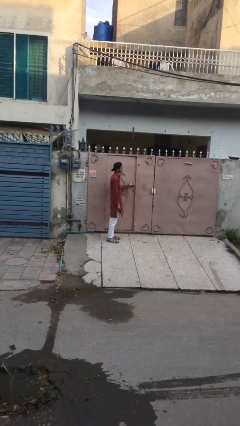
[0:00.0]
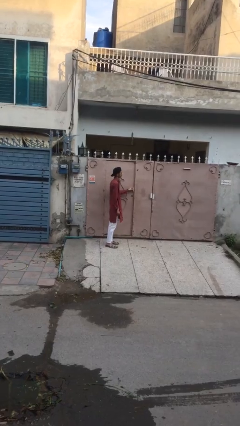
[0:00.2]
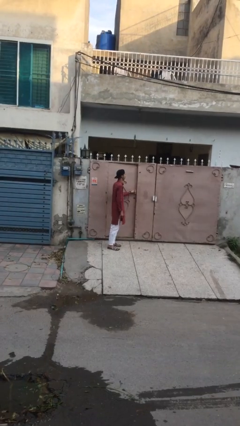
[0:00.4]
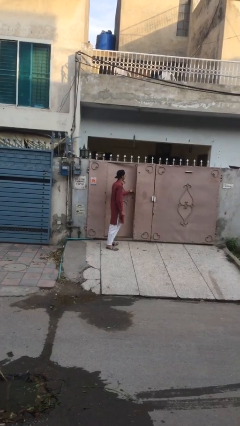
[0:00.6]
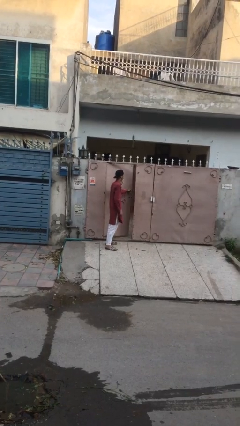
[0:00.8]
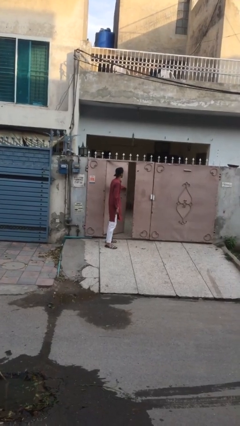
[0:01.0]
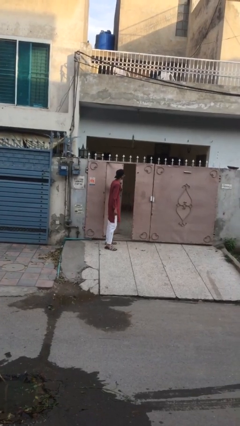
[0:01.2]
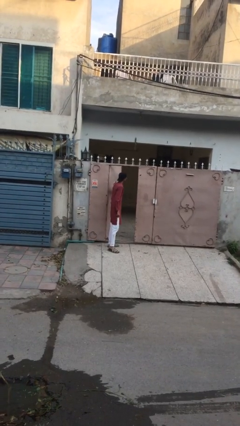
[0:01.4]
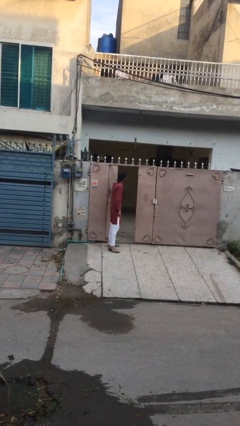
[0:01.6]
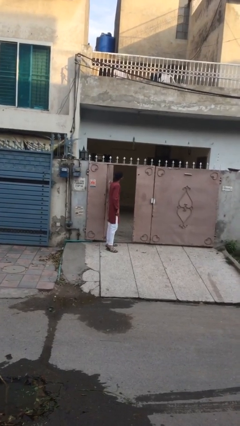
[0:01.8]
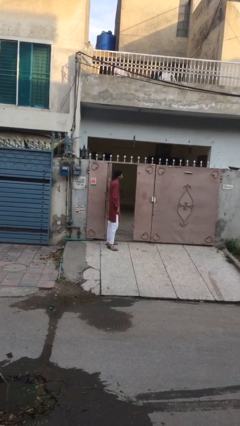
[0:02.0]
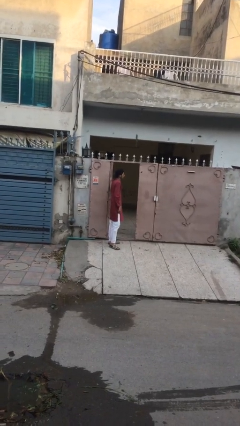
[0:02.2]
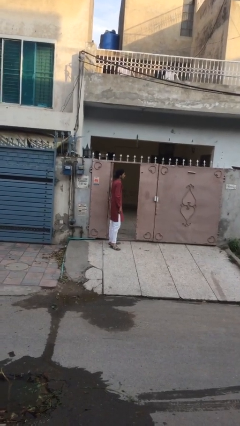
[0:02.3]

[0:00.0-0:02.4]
person opens facility door

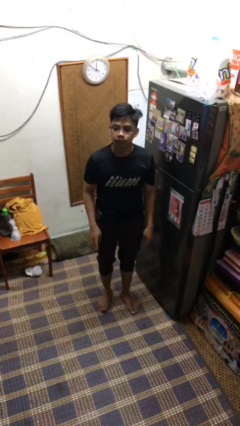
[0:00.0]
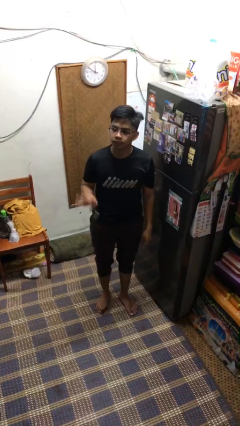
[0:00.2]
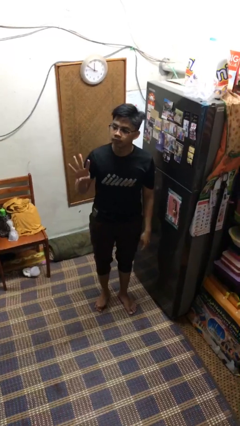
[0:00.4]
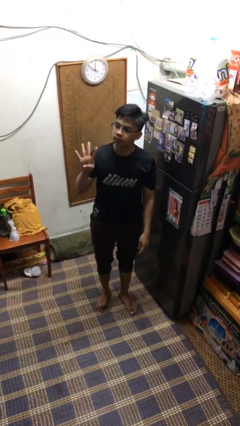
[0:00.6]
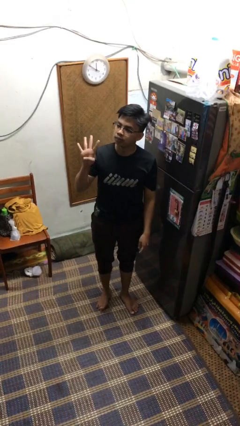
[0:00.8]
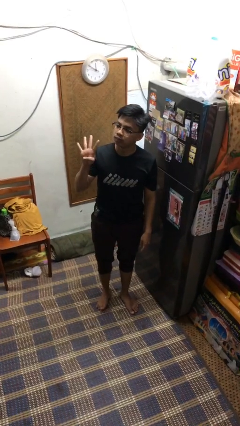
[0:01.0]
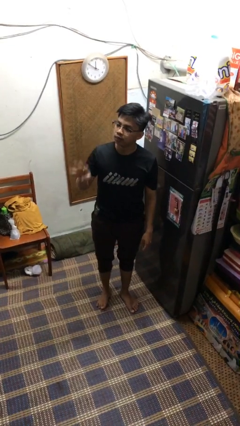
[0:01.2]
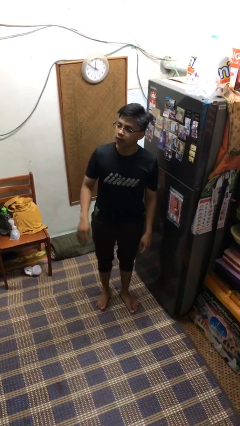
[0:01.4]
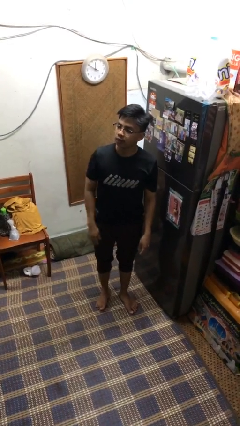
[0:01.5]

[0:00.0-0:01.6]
person gestures number four

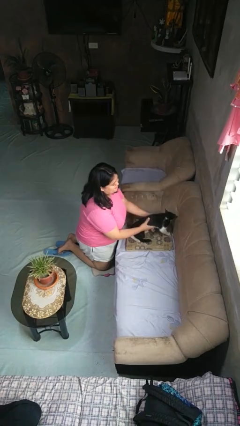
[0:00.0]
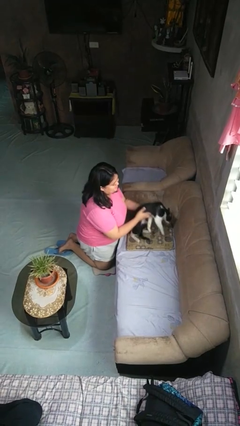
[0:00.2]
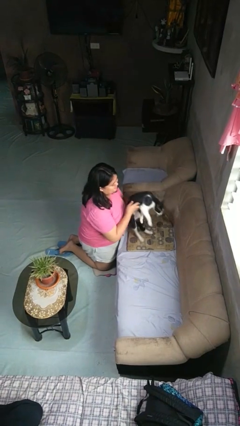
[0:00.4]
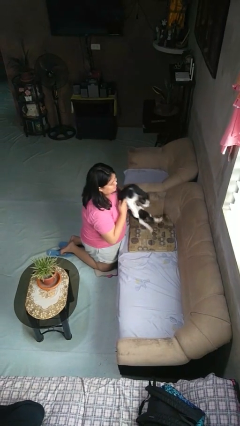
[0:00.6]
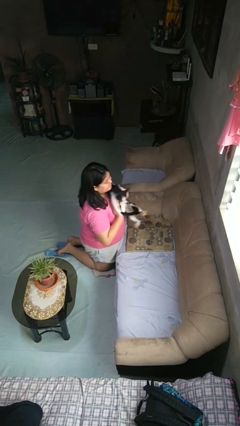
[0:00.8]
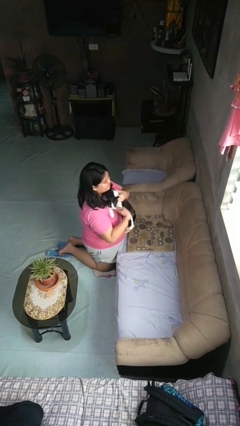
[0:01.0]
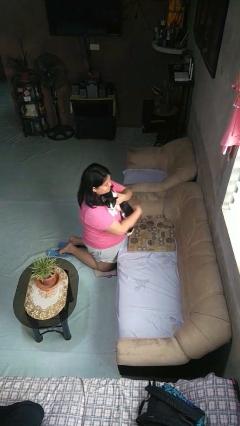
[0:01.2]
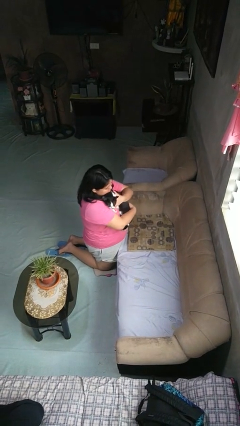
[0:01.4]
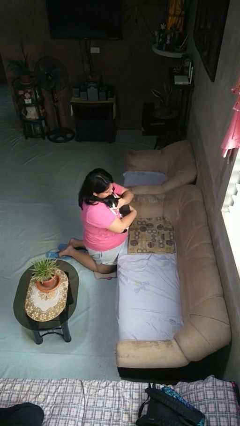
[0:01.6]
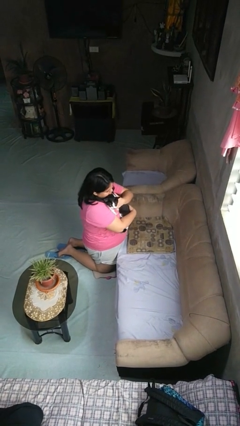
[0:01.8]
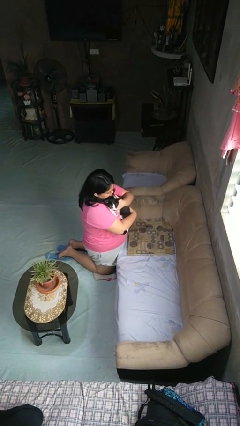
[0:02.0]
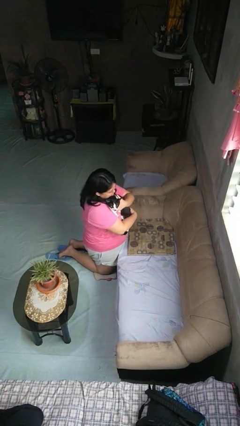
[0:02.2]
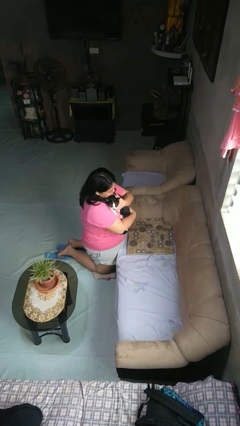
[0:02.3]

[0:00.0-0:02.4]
person hugs cat

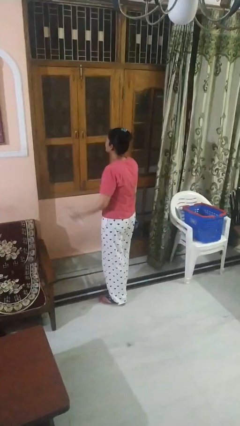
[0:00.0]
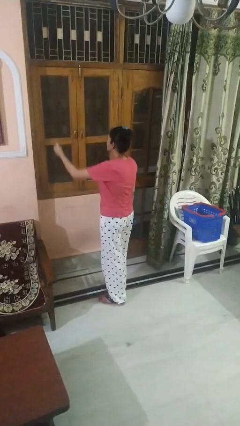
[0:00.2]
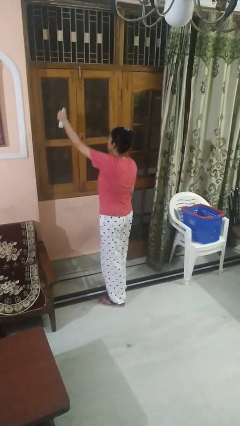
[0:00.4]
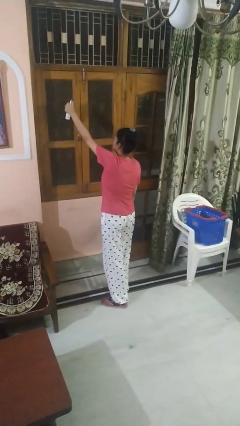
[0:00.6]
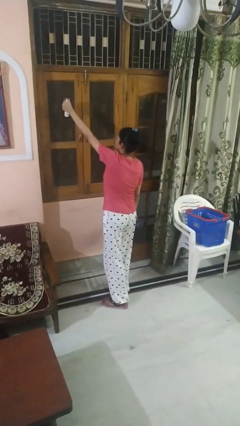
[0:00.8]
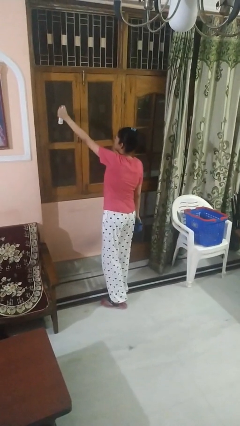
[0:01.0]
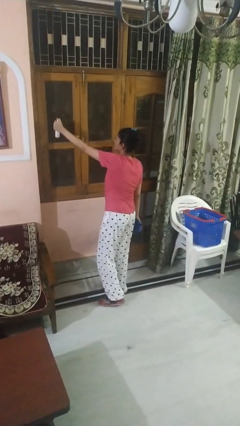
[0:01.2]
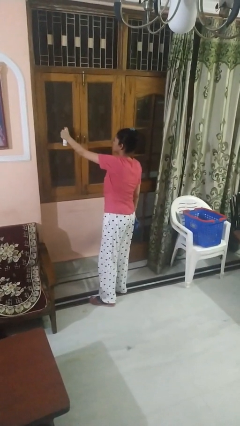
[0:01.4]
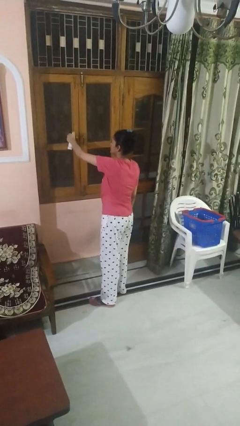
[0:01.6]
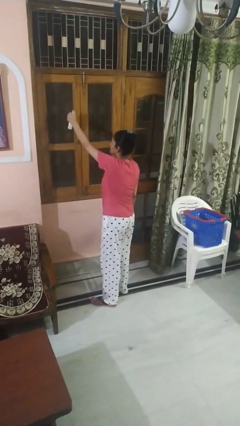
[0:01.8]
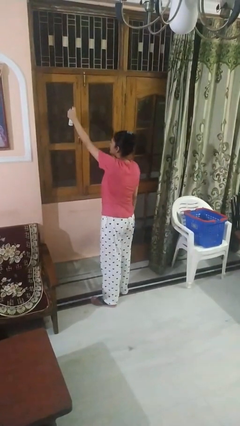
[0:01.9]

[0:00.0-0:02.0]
person sprays from bottle

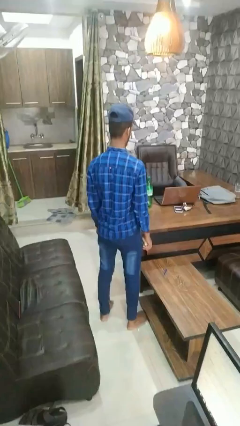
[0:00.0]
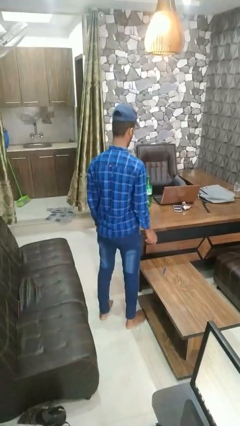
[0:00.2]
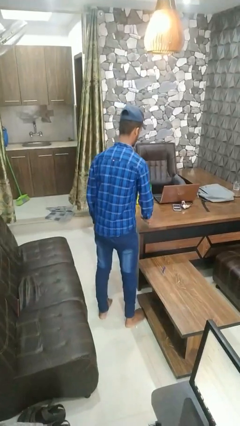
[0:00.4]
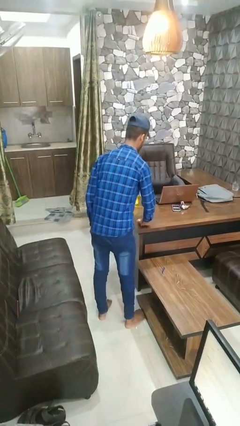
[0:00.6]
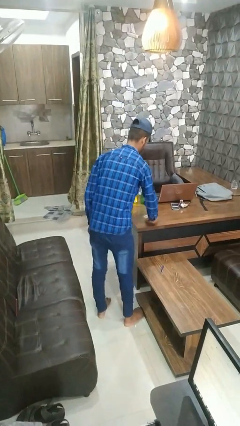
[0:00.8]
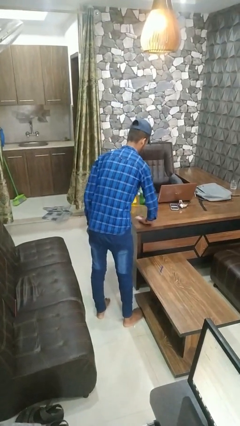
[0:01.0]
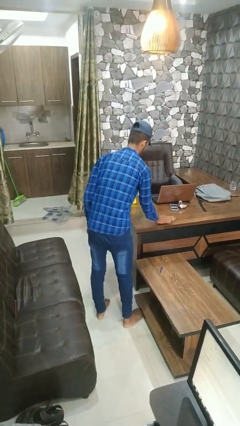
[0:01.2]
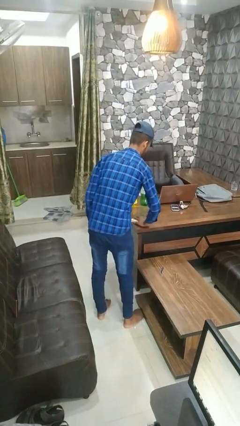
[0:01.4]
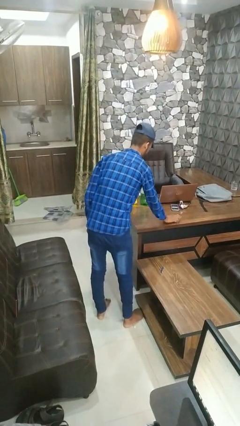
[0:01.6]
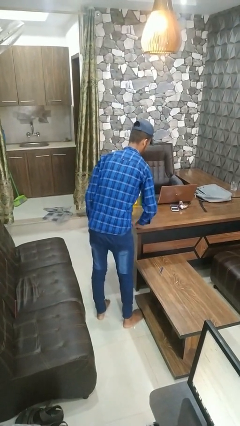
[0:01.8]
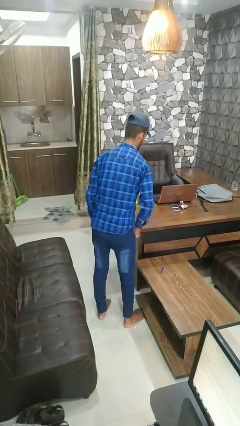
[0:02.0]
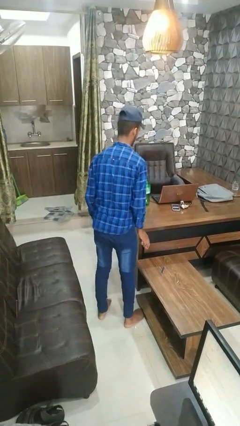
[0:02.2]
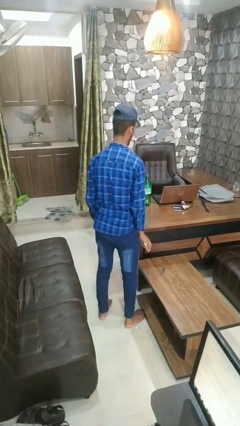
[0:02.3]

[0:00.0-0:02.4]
person dusts furniture

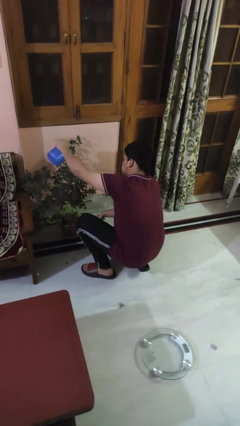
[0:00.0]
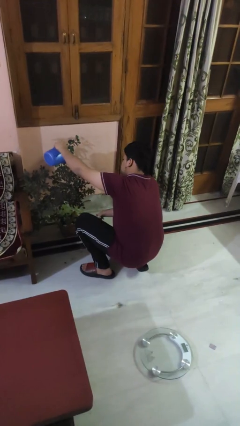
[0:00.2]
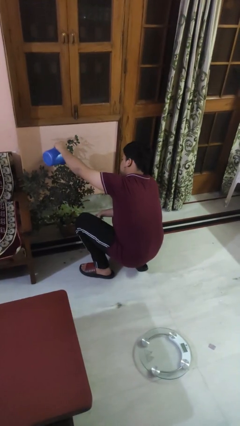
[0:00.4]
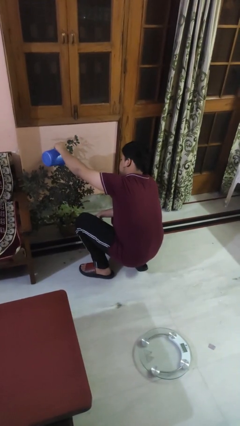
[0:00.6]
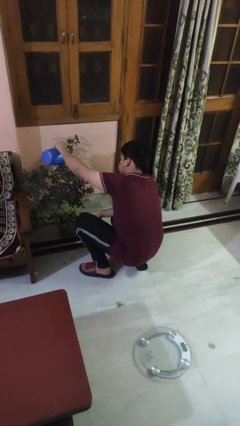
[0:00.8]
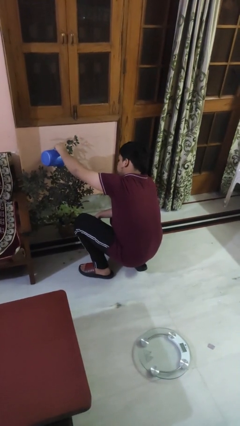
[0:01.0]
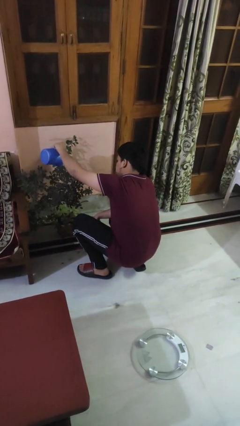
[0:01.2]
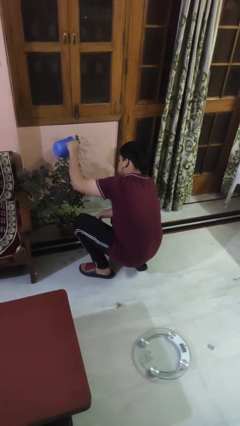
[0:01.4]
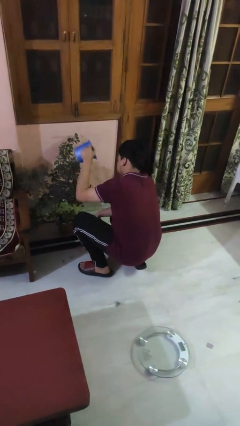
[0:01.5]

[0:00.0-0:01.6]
person waters houseplant

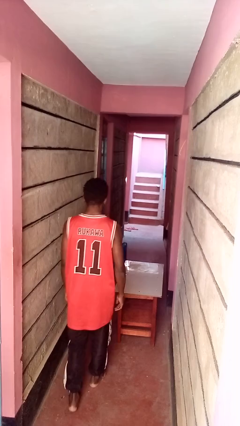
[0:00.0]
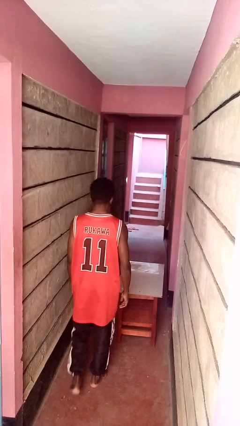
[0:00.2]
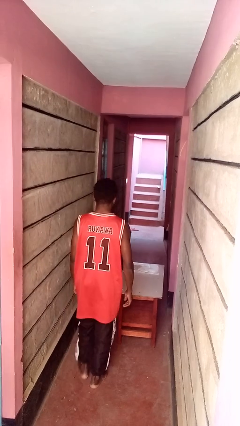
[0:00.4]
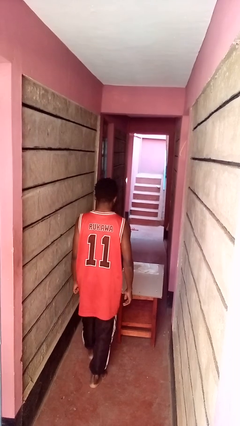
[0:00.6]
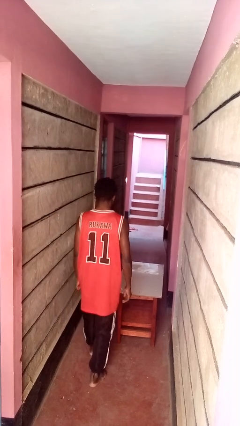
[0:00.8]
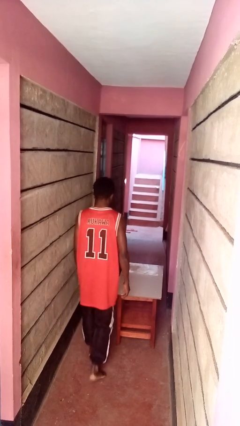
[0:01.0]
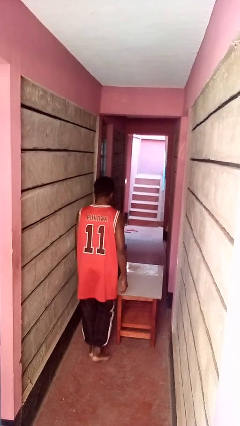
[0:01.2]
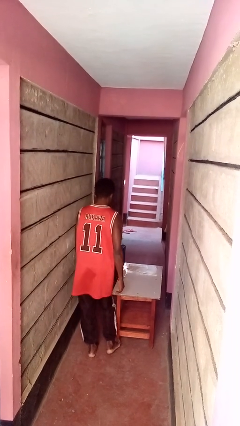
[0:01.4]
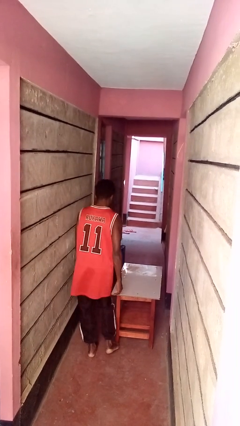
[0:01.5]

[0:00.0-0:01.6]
person stubs toe

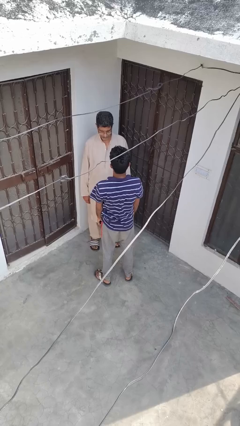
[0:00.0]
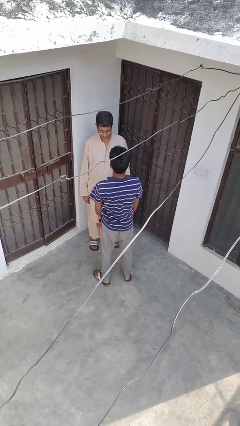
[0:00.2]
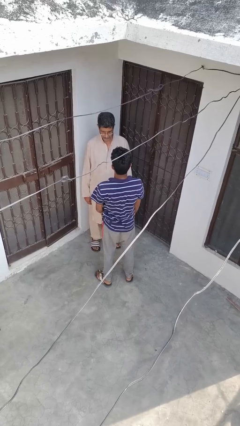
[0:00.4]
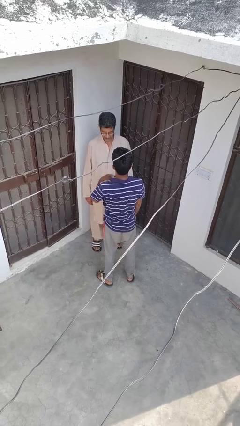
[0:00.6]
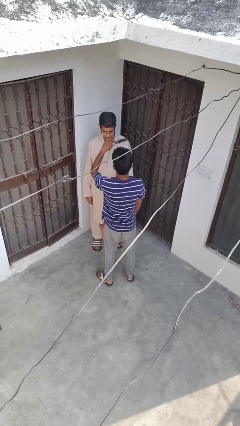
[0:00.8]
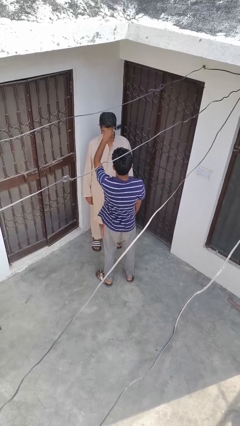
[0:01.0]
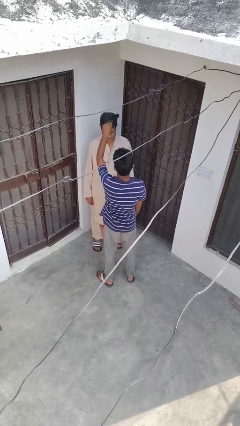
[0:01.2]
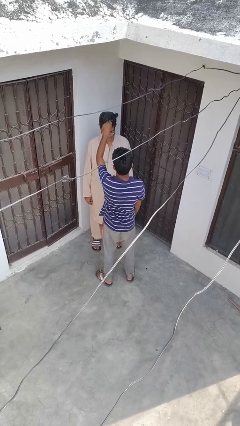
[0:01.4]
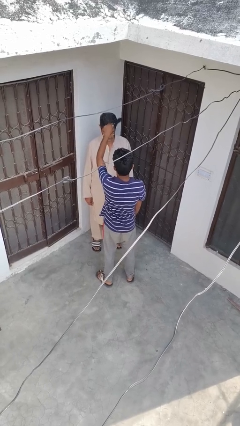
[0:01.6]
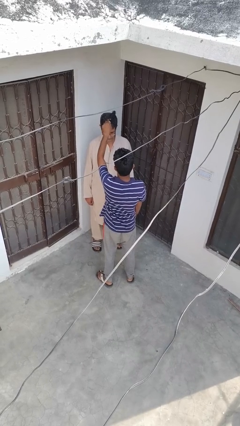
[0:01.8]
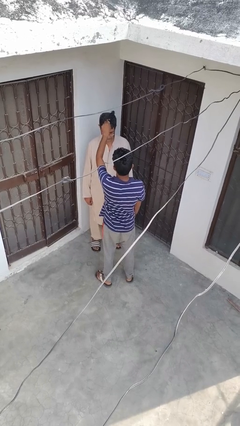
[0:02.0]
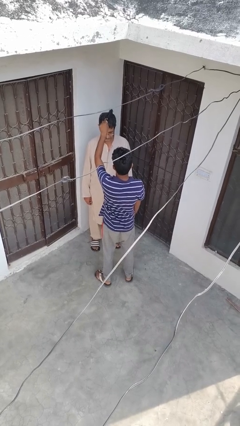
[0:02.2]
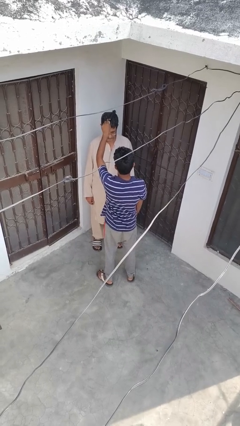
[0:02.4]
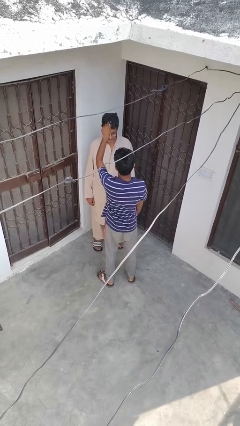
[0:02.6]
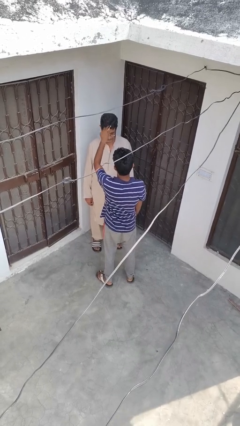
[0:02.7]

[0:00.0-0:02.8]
person brushes hair of person

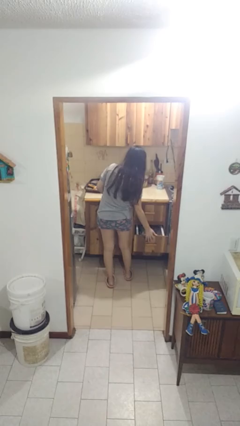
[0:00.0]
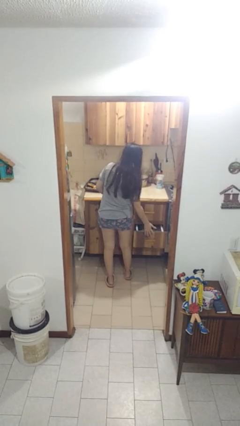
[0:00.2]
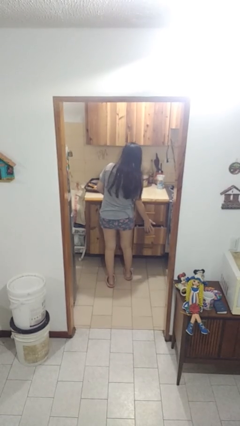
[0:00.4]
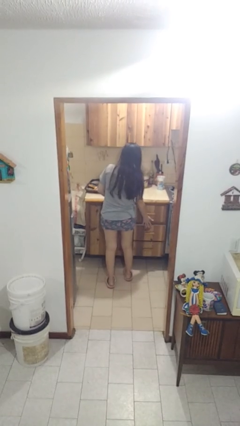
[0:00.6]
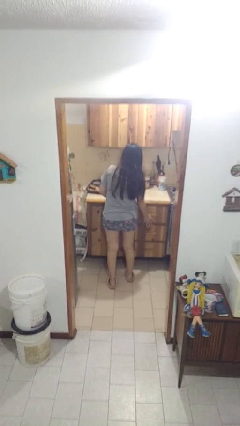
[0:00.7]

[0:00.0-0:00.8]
person closes kitchen drawer
